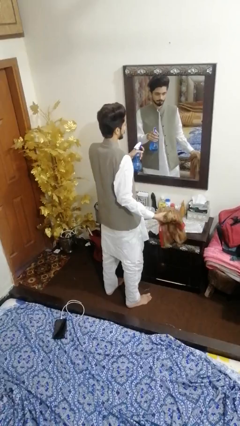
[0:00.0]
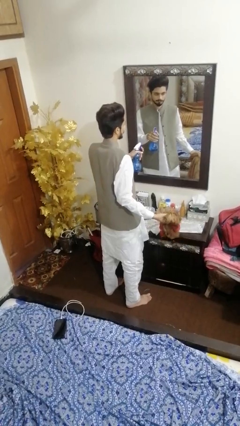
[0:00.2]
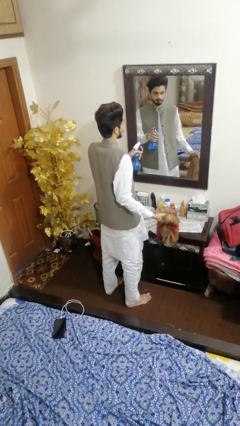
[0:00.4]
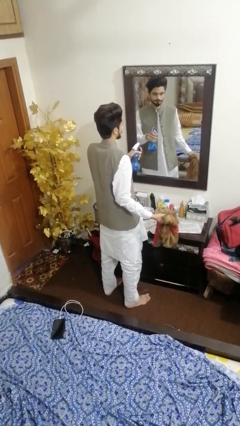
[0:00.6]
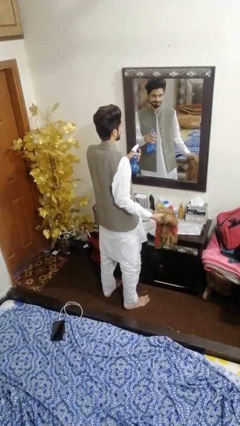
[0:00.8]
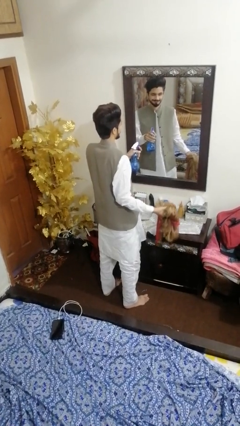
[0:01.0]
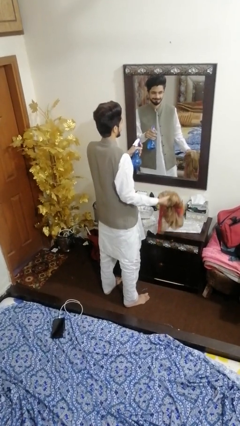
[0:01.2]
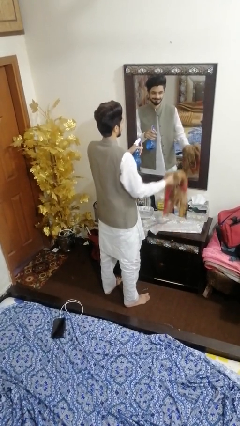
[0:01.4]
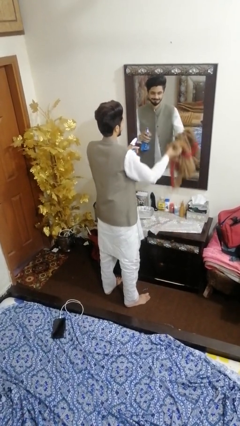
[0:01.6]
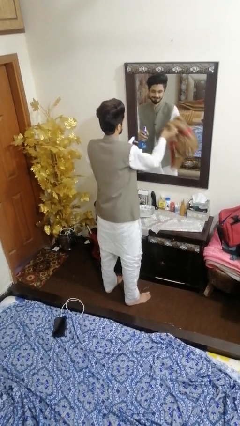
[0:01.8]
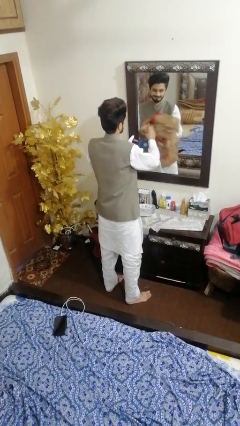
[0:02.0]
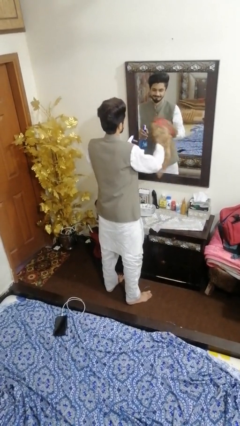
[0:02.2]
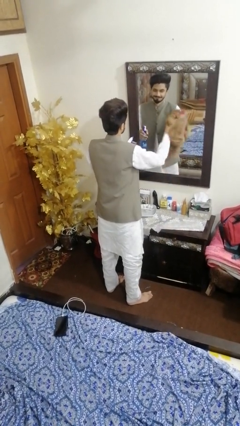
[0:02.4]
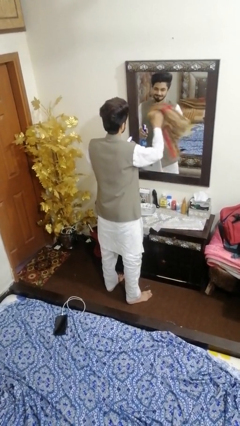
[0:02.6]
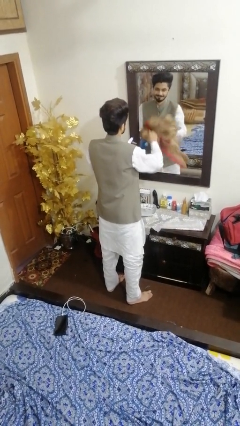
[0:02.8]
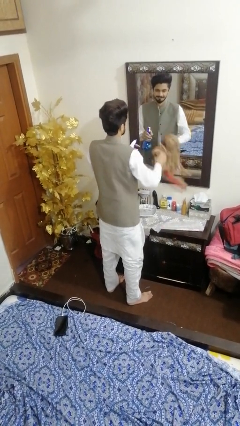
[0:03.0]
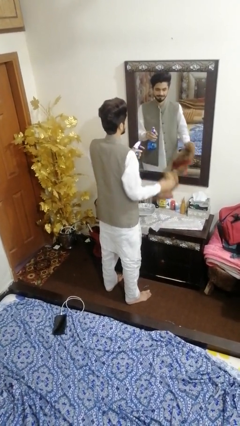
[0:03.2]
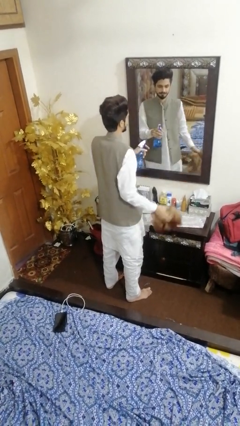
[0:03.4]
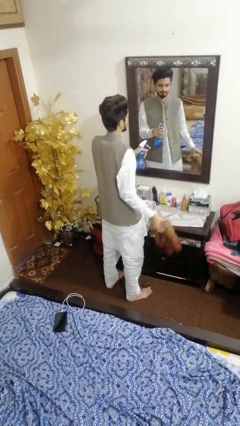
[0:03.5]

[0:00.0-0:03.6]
person sprays from bottle

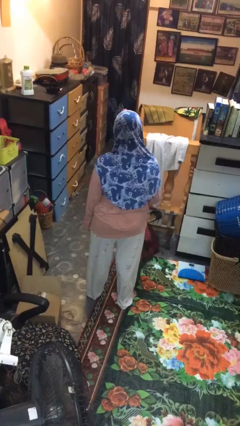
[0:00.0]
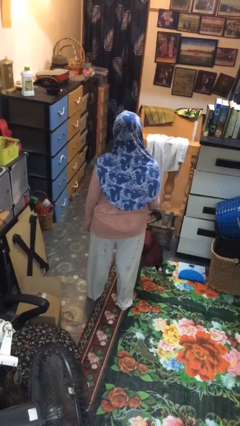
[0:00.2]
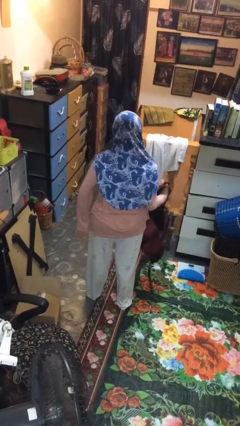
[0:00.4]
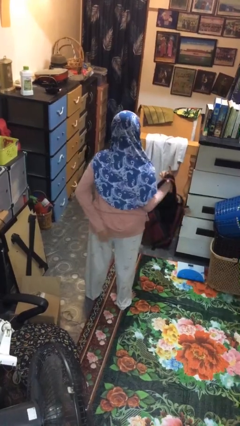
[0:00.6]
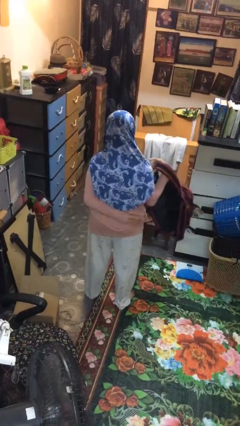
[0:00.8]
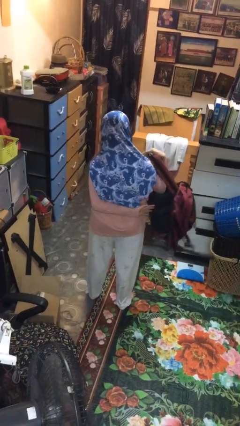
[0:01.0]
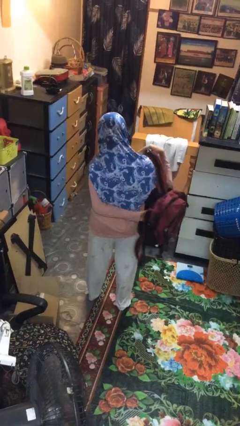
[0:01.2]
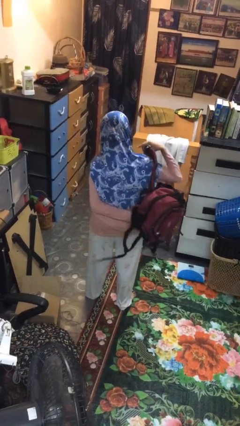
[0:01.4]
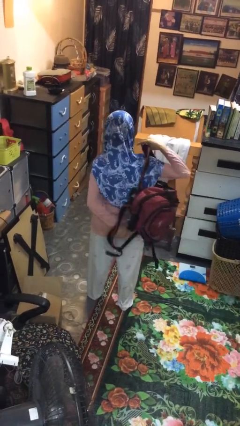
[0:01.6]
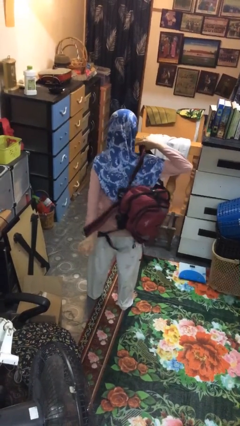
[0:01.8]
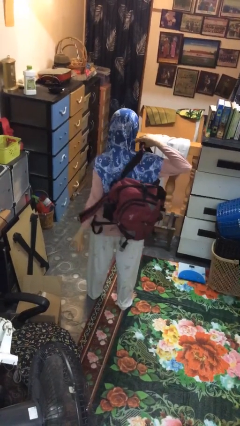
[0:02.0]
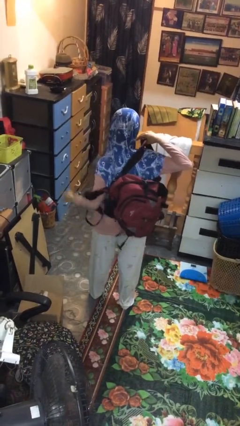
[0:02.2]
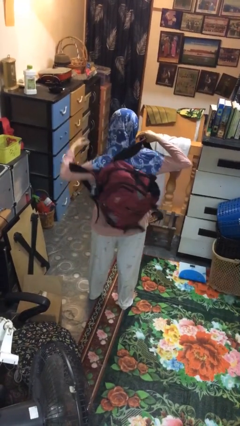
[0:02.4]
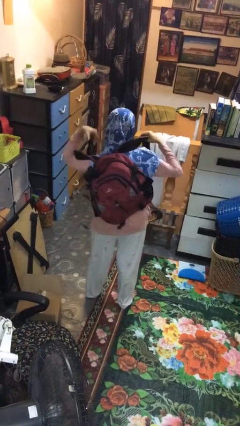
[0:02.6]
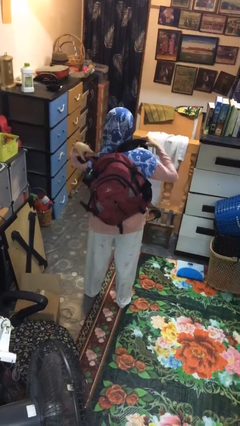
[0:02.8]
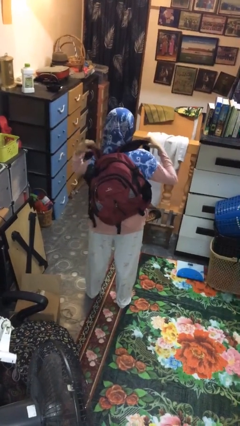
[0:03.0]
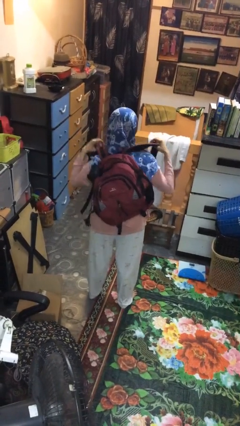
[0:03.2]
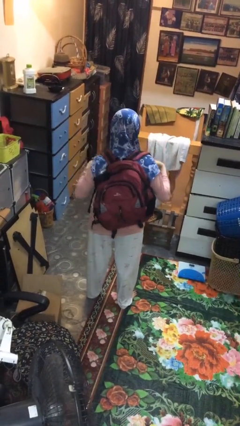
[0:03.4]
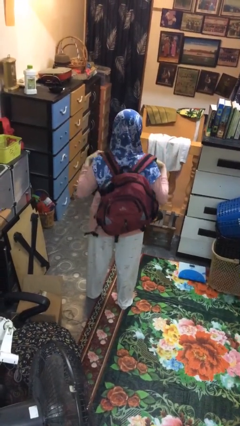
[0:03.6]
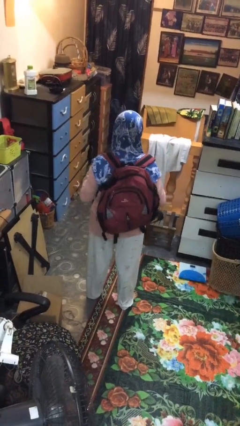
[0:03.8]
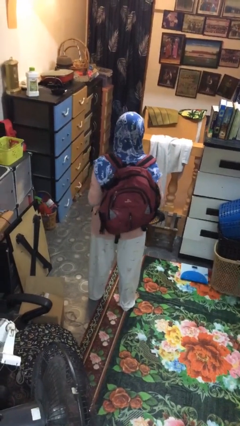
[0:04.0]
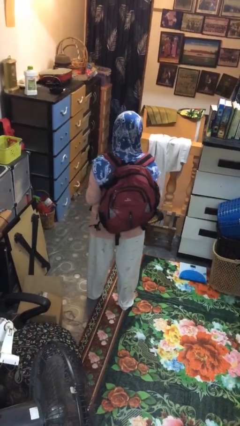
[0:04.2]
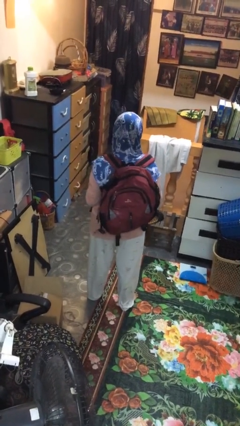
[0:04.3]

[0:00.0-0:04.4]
person puts on backpack

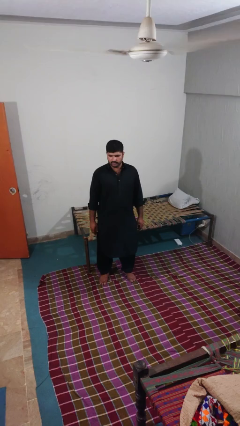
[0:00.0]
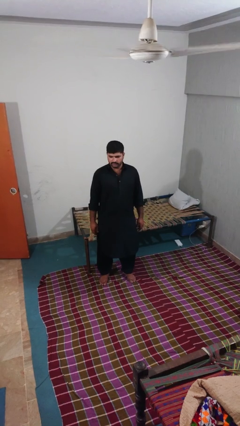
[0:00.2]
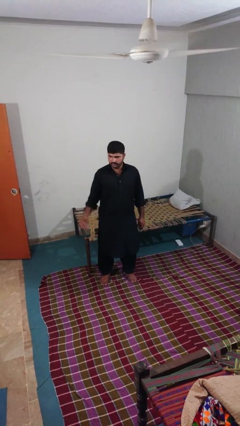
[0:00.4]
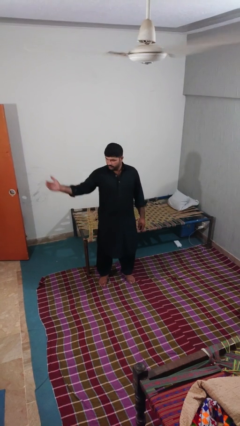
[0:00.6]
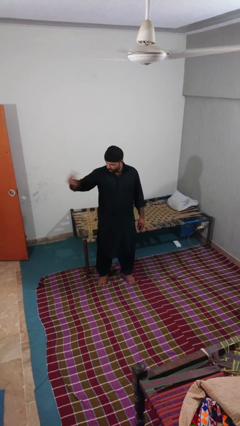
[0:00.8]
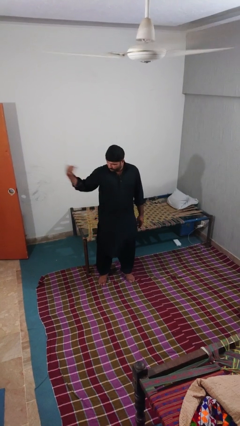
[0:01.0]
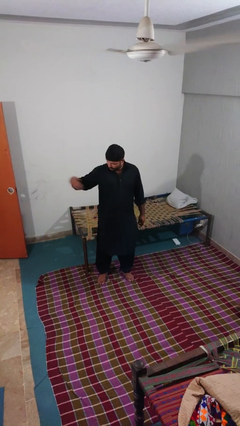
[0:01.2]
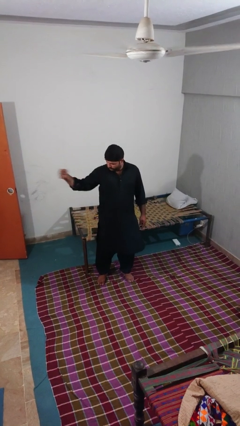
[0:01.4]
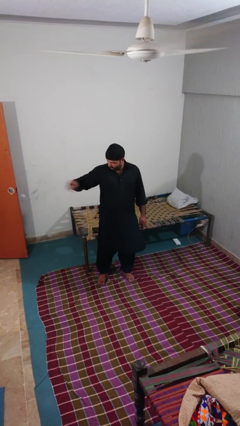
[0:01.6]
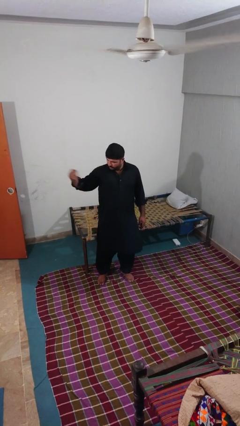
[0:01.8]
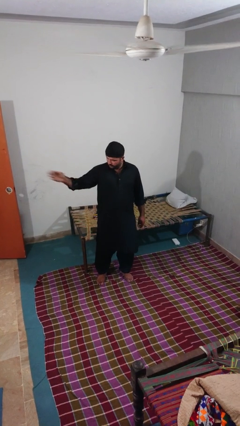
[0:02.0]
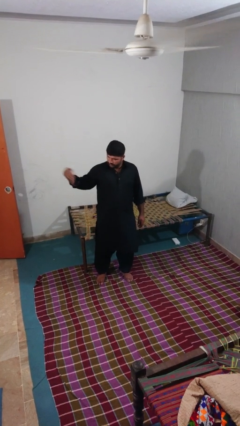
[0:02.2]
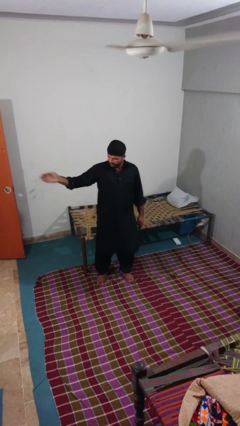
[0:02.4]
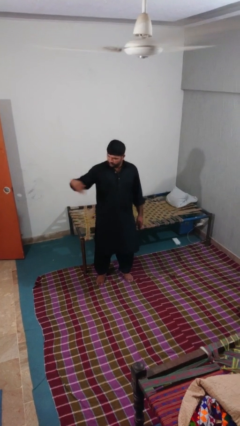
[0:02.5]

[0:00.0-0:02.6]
person gestures come here

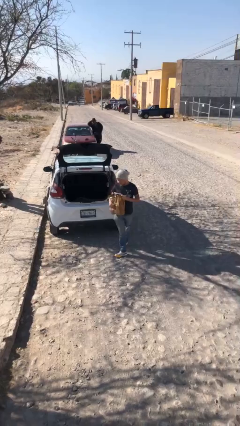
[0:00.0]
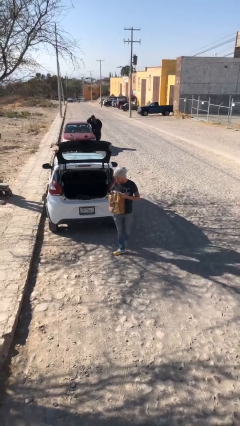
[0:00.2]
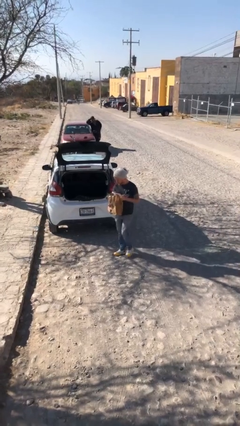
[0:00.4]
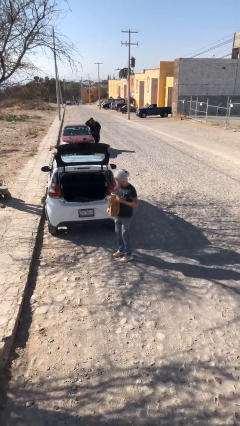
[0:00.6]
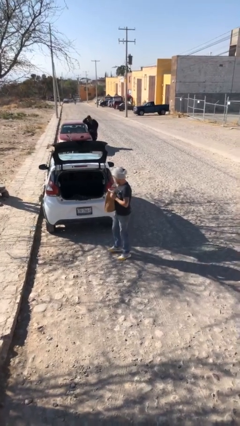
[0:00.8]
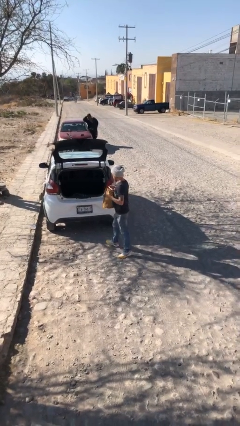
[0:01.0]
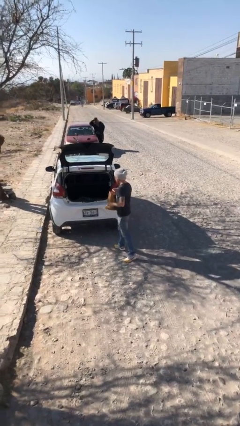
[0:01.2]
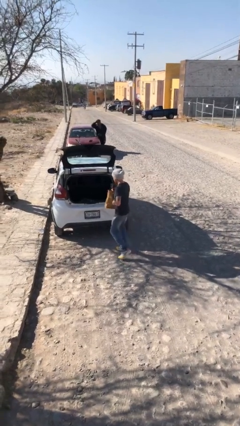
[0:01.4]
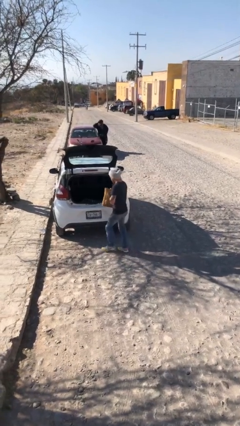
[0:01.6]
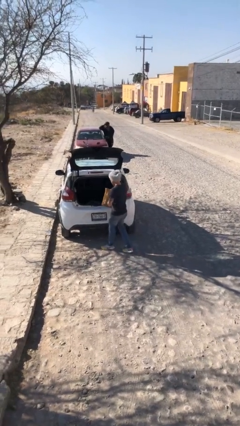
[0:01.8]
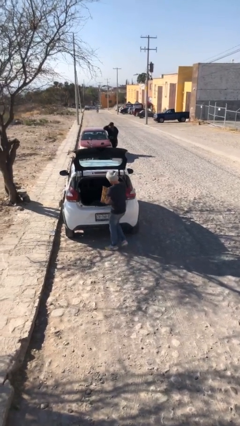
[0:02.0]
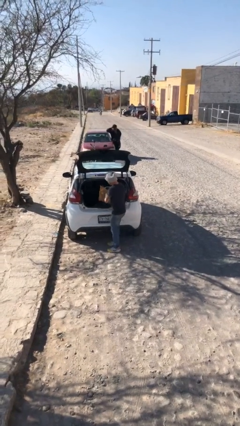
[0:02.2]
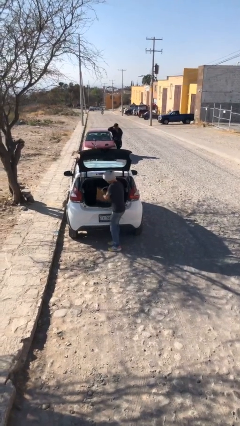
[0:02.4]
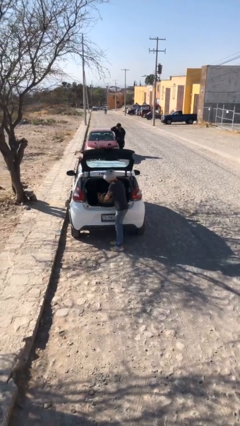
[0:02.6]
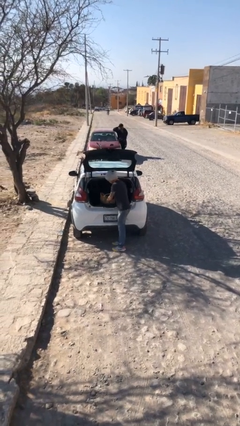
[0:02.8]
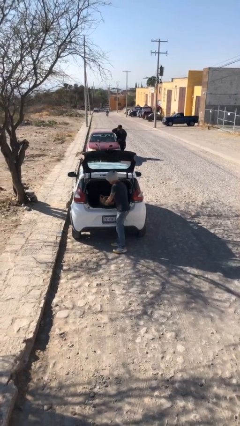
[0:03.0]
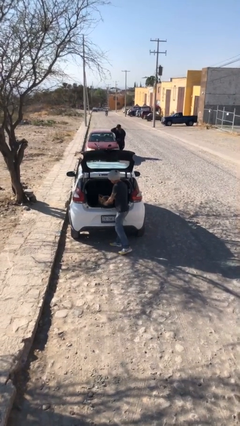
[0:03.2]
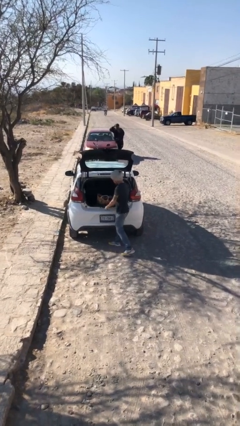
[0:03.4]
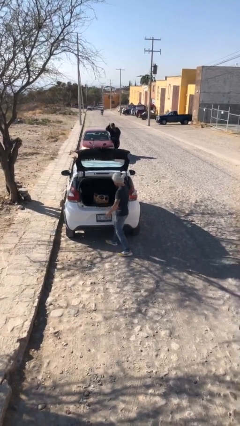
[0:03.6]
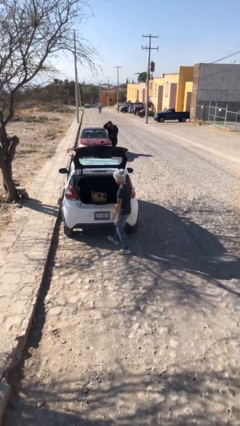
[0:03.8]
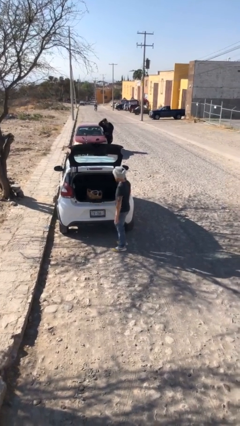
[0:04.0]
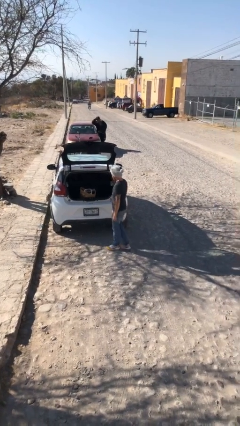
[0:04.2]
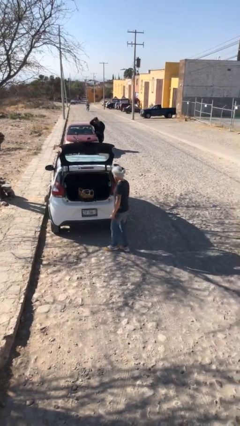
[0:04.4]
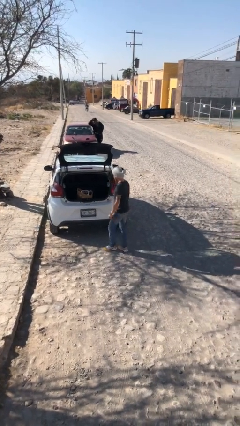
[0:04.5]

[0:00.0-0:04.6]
person loads car

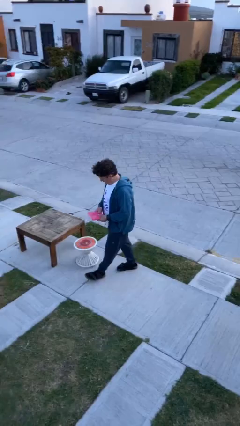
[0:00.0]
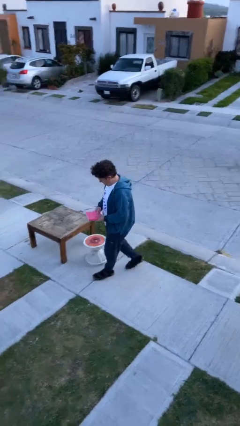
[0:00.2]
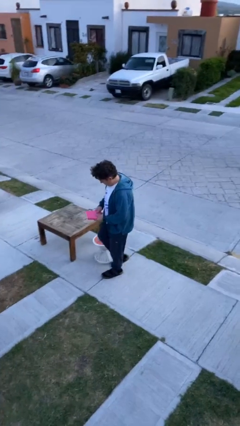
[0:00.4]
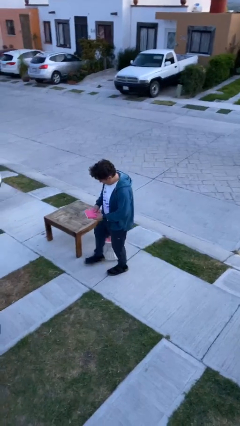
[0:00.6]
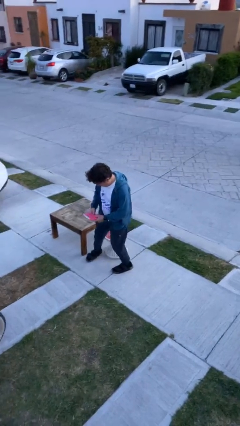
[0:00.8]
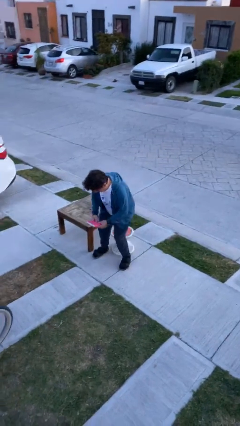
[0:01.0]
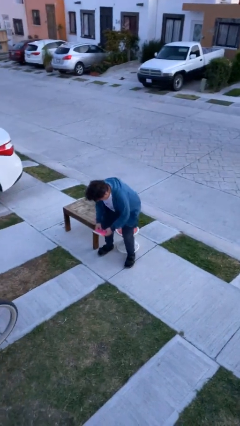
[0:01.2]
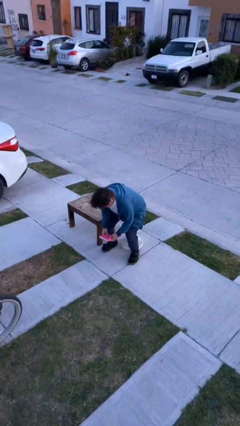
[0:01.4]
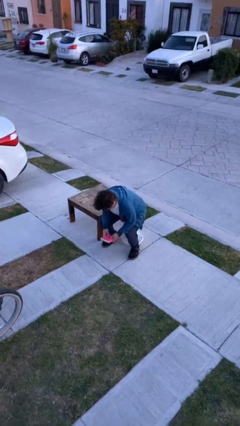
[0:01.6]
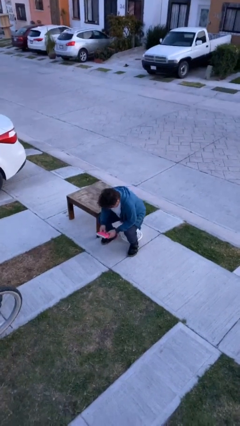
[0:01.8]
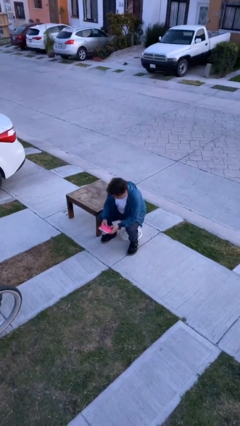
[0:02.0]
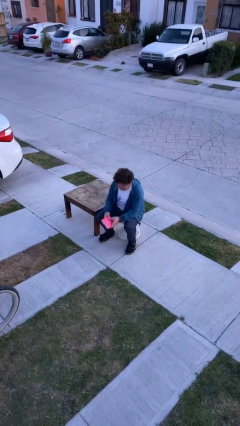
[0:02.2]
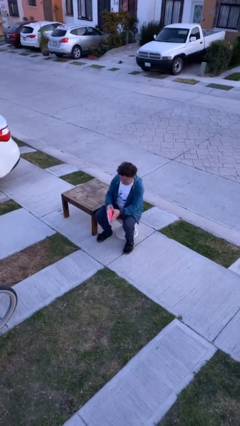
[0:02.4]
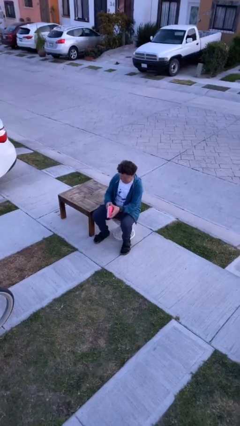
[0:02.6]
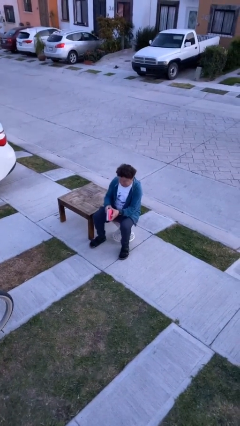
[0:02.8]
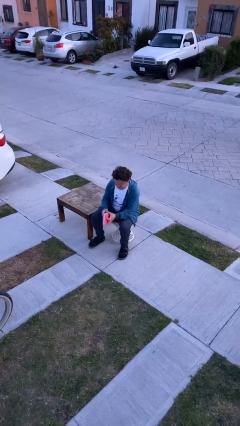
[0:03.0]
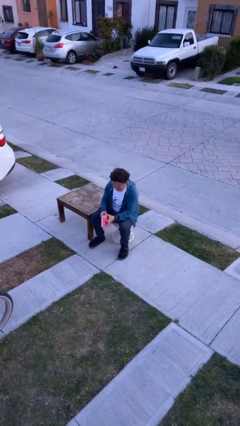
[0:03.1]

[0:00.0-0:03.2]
person sits down
